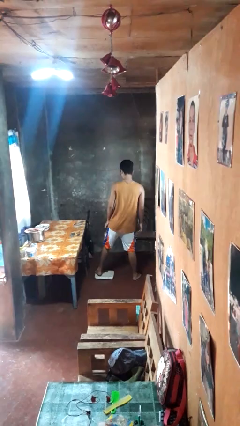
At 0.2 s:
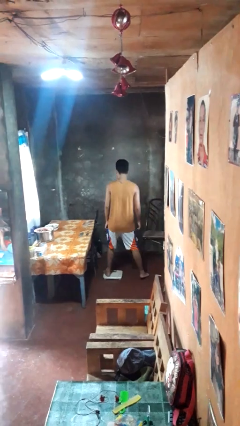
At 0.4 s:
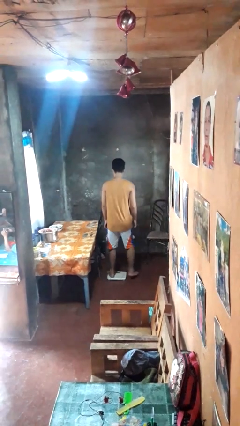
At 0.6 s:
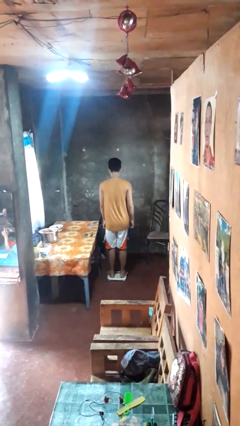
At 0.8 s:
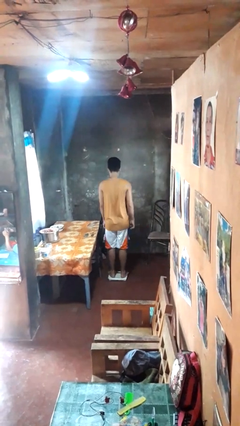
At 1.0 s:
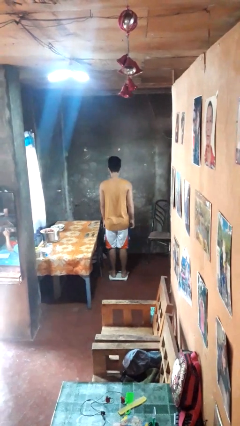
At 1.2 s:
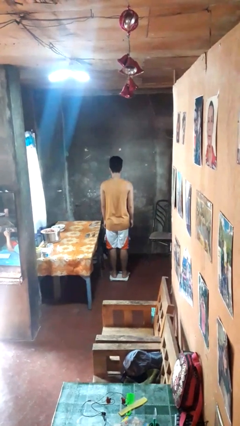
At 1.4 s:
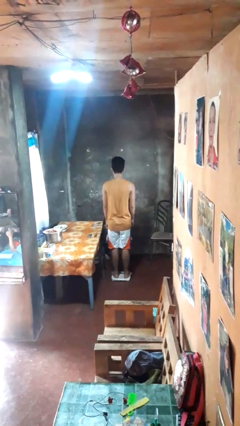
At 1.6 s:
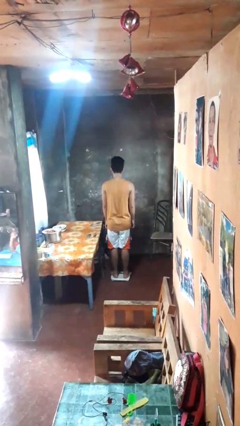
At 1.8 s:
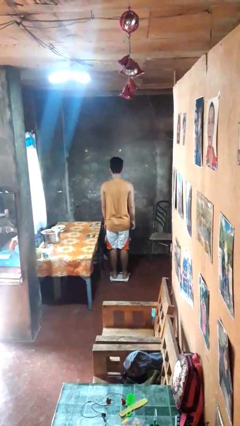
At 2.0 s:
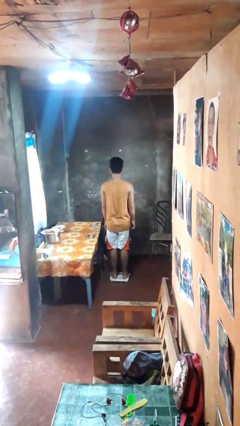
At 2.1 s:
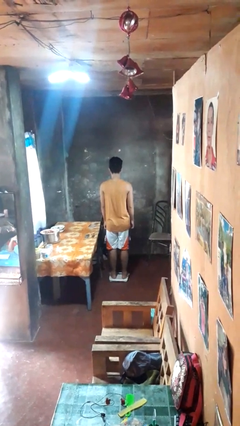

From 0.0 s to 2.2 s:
person uses bodyweight scale

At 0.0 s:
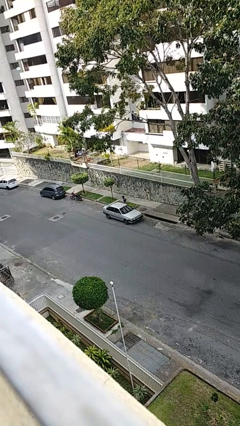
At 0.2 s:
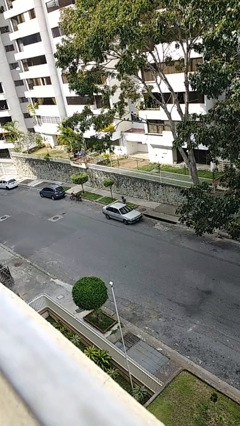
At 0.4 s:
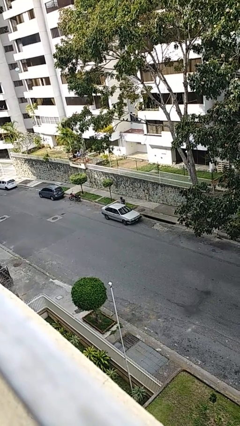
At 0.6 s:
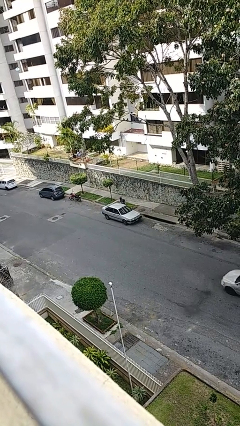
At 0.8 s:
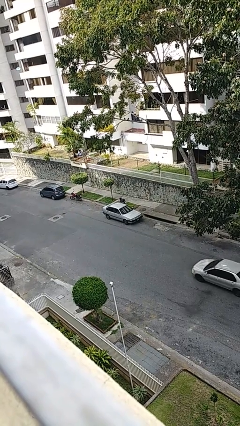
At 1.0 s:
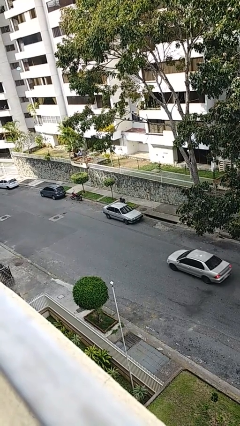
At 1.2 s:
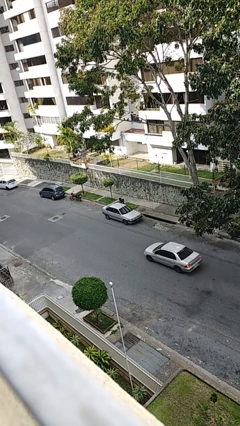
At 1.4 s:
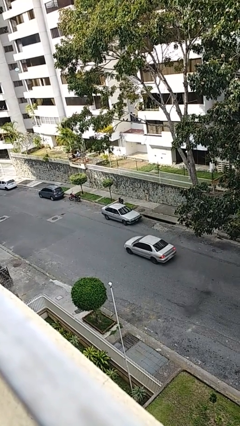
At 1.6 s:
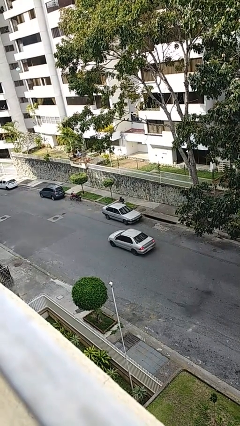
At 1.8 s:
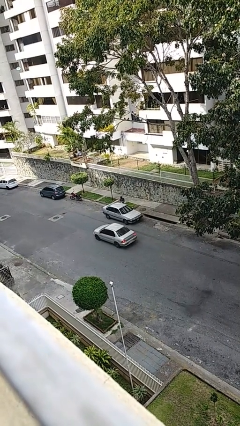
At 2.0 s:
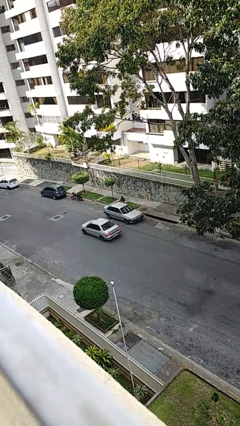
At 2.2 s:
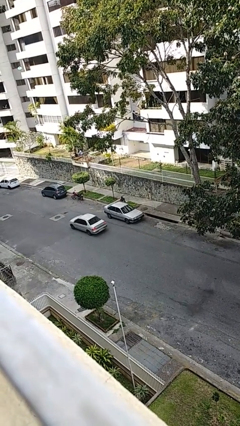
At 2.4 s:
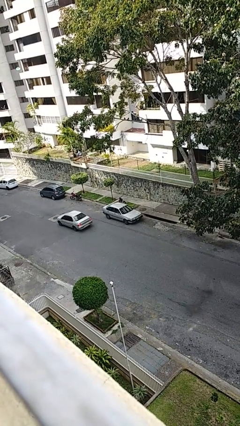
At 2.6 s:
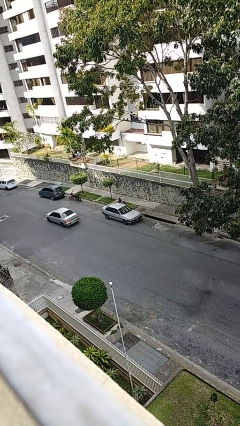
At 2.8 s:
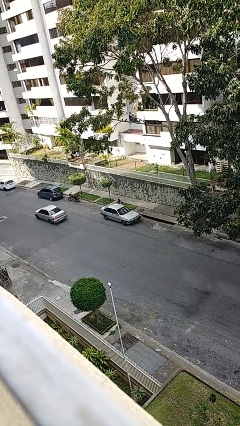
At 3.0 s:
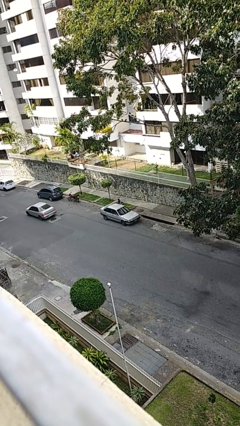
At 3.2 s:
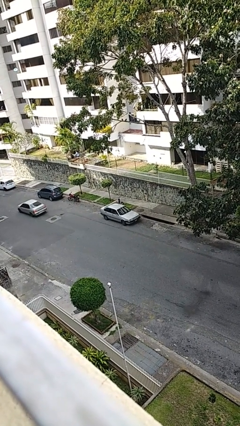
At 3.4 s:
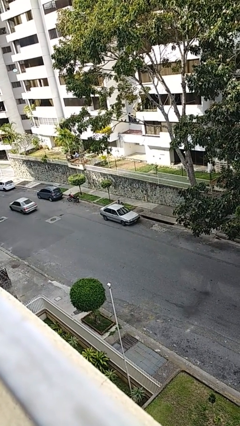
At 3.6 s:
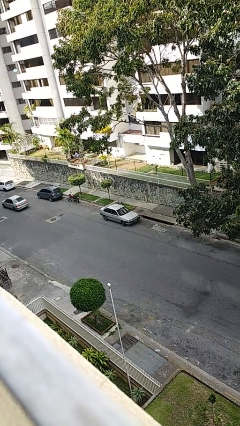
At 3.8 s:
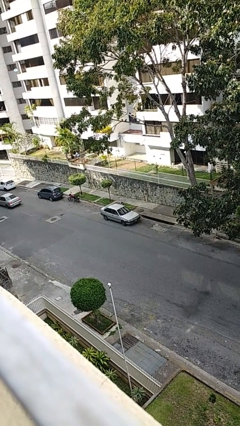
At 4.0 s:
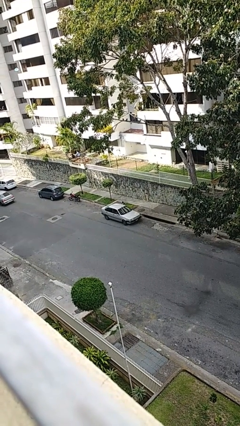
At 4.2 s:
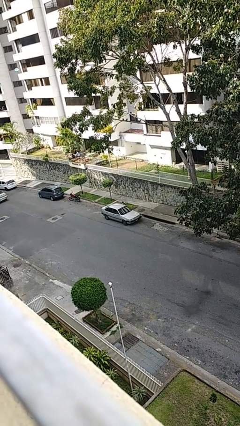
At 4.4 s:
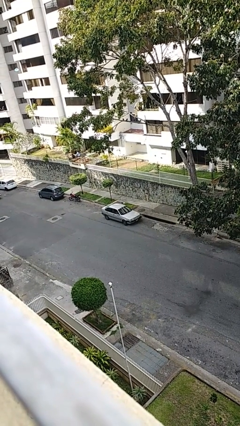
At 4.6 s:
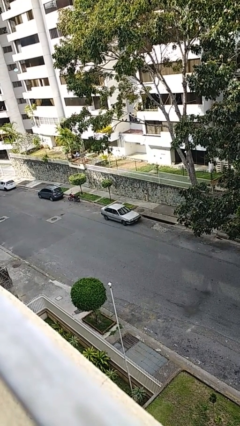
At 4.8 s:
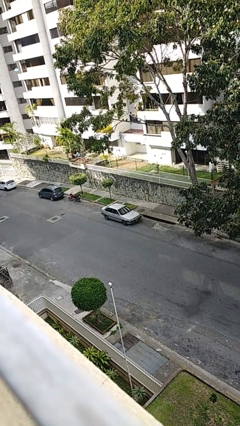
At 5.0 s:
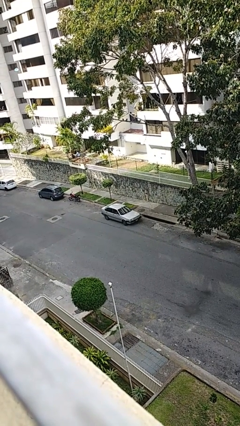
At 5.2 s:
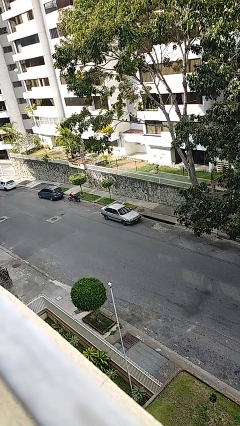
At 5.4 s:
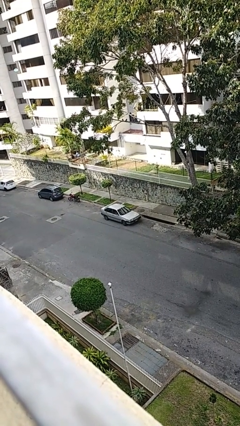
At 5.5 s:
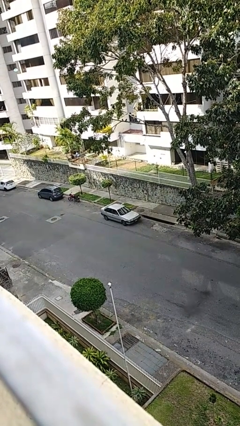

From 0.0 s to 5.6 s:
car picks up person

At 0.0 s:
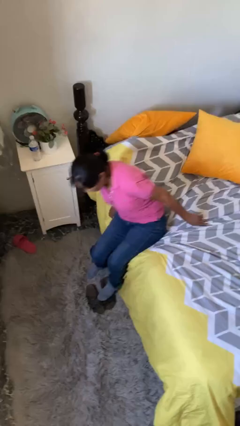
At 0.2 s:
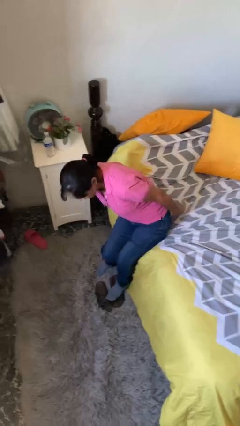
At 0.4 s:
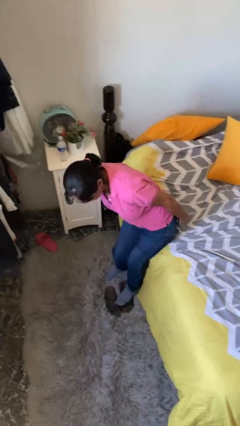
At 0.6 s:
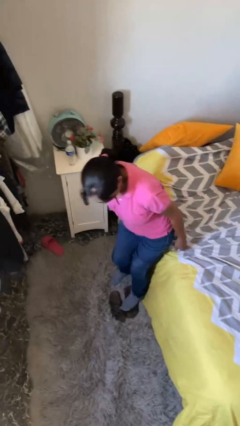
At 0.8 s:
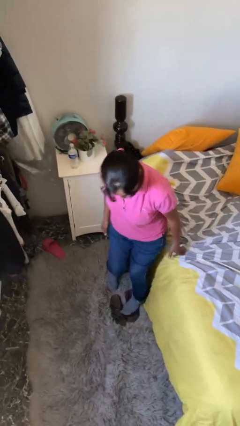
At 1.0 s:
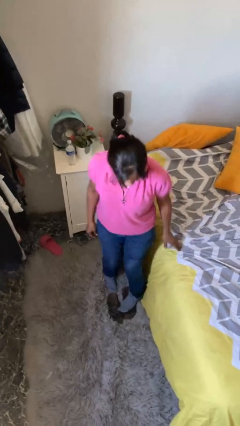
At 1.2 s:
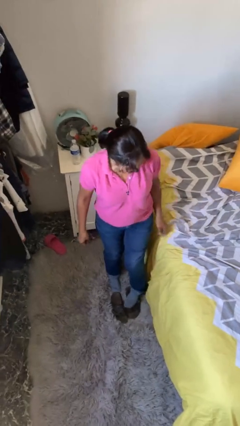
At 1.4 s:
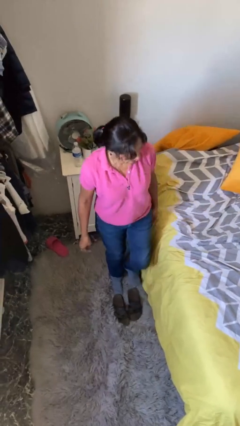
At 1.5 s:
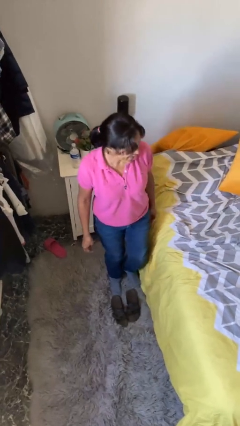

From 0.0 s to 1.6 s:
person stands up

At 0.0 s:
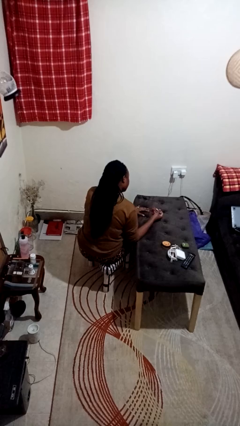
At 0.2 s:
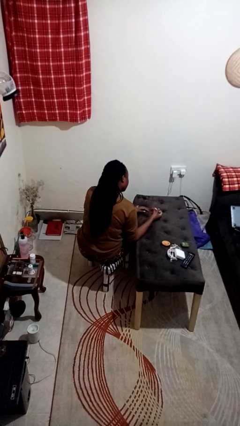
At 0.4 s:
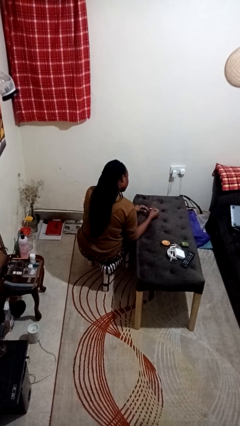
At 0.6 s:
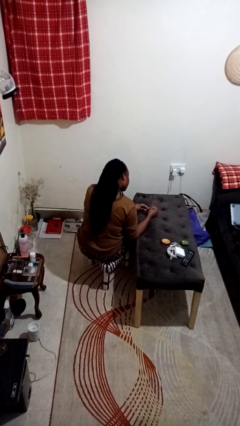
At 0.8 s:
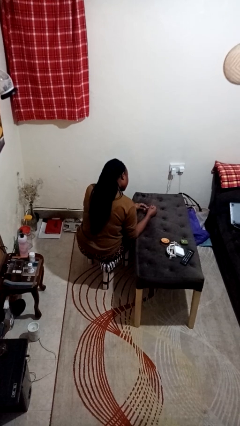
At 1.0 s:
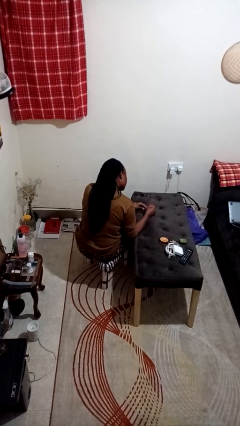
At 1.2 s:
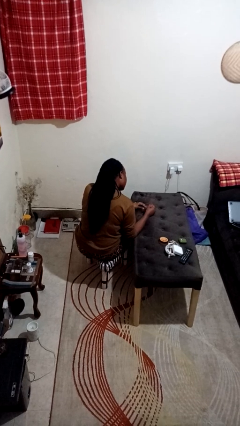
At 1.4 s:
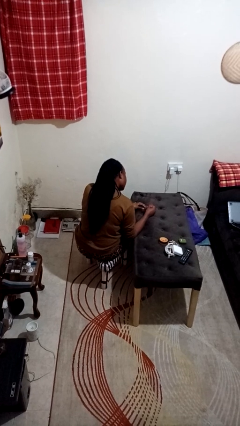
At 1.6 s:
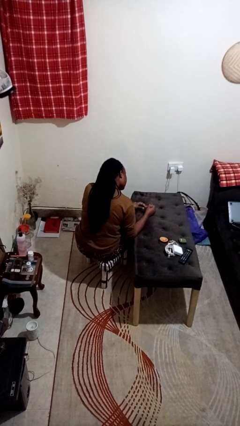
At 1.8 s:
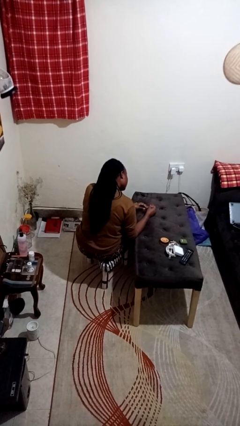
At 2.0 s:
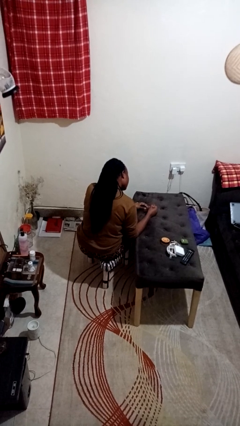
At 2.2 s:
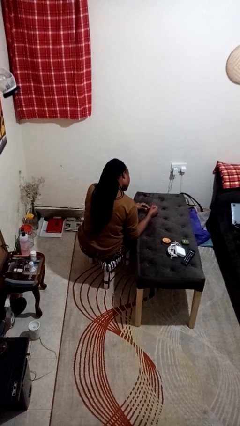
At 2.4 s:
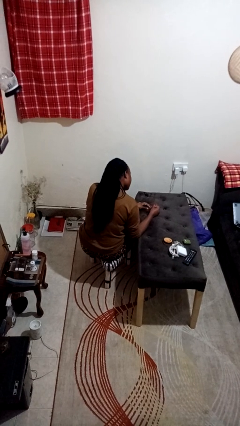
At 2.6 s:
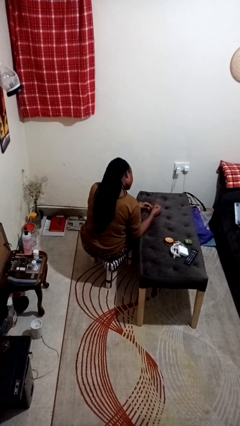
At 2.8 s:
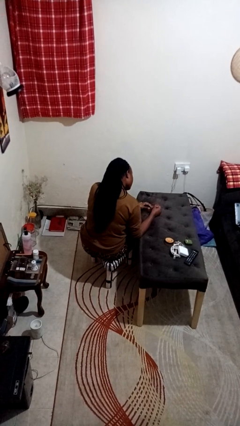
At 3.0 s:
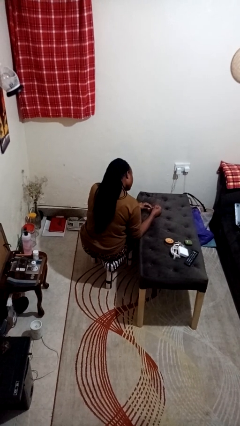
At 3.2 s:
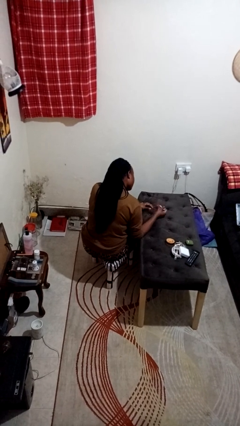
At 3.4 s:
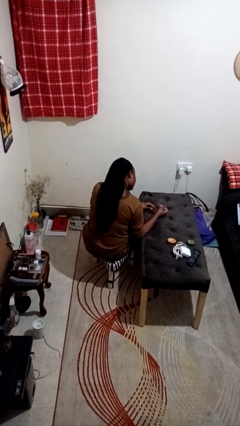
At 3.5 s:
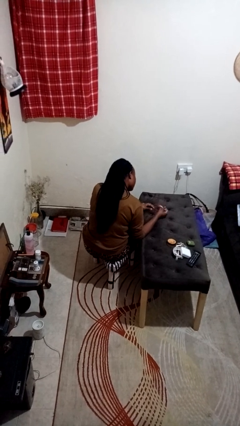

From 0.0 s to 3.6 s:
person paints fingernails

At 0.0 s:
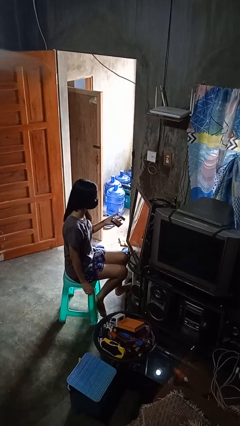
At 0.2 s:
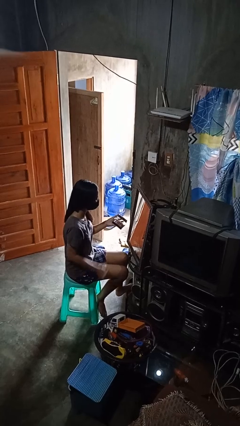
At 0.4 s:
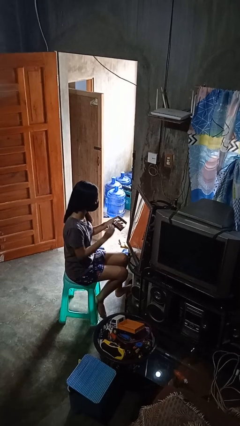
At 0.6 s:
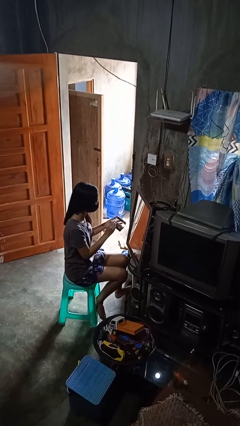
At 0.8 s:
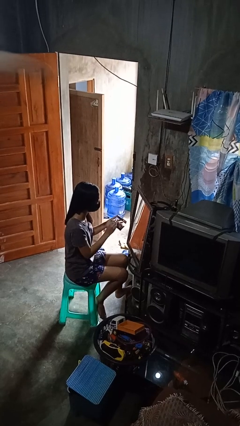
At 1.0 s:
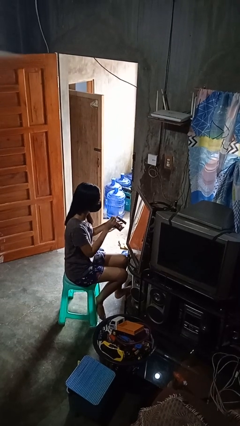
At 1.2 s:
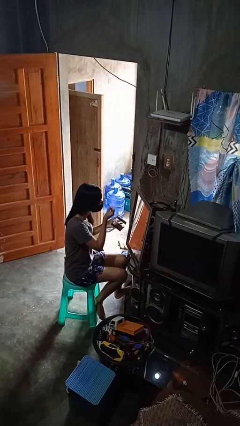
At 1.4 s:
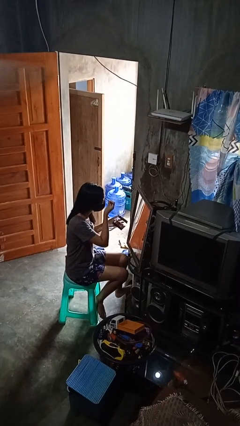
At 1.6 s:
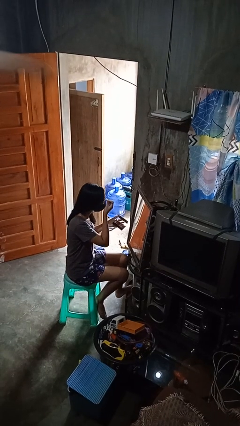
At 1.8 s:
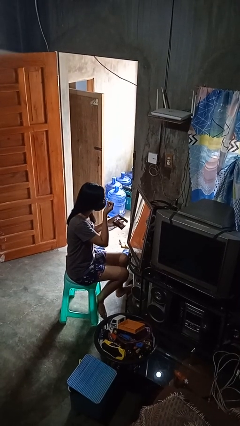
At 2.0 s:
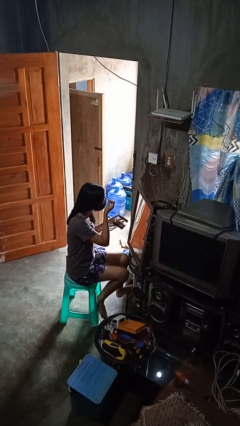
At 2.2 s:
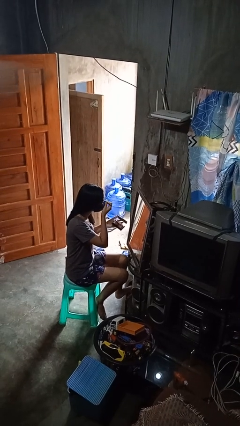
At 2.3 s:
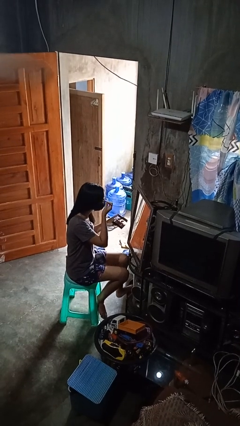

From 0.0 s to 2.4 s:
person applies eye makeup

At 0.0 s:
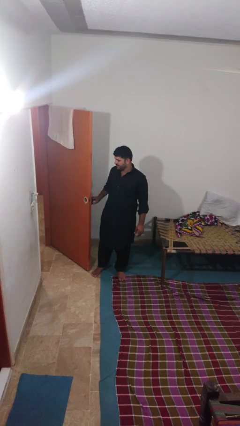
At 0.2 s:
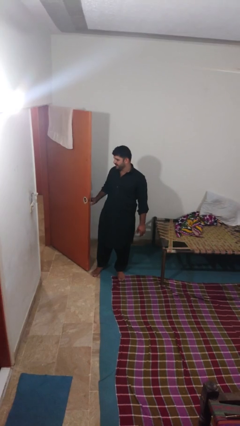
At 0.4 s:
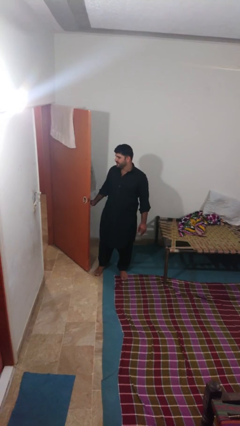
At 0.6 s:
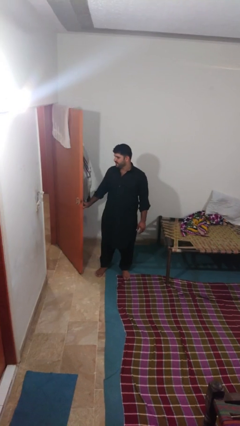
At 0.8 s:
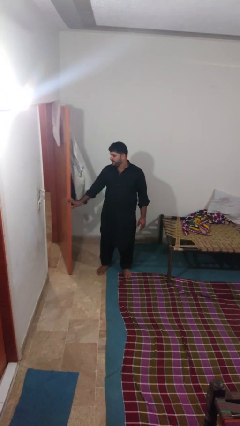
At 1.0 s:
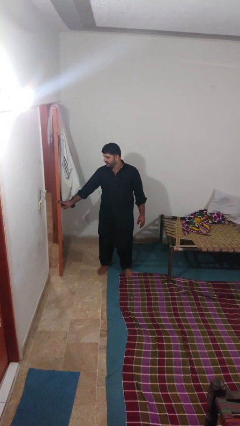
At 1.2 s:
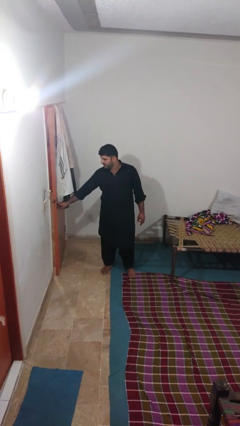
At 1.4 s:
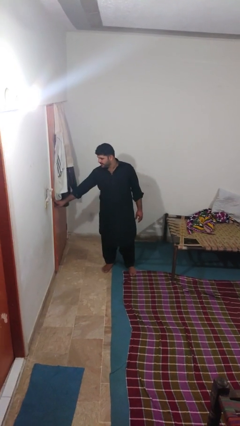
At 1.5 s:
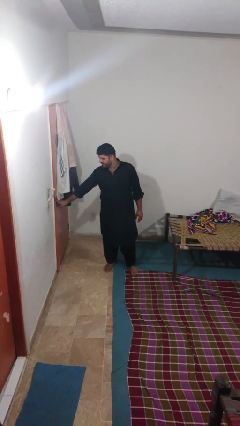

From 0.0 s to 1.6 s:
person closes gate

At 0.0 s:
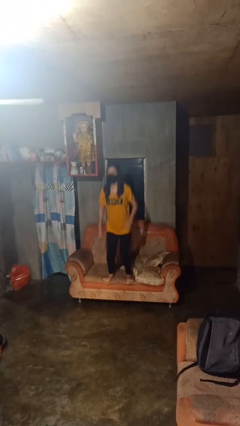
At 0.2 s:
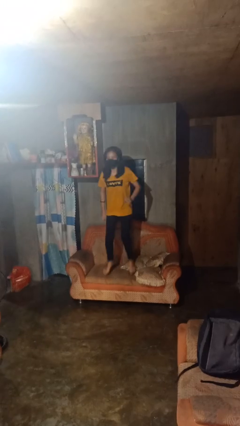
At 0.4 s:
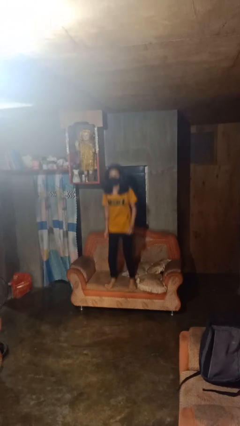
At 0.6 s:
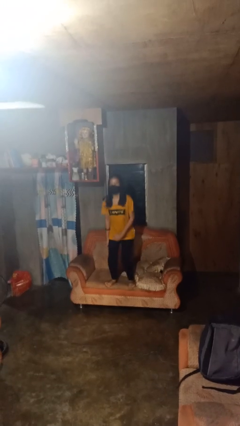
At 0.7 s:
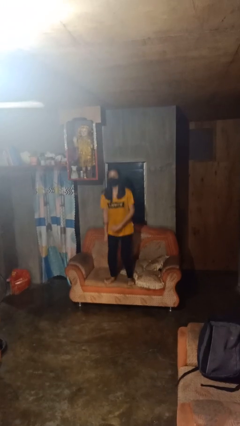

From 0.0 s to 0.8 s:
person jumps on couch
